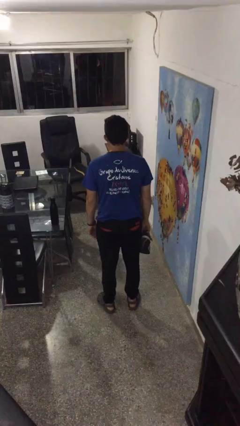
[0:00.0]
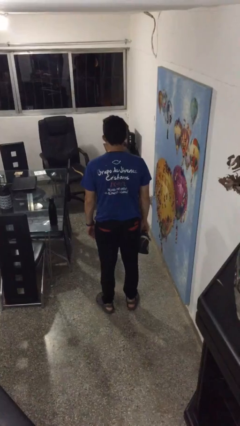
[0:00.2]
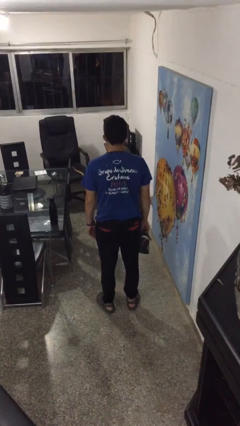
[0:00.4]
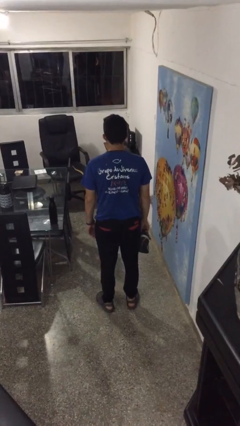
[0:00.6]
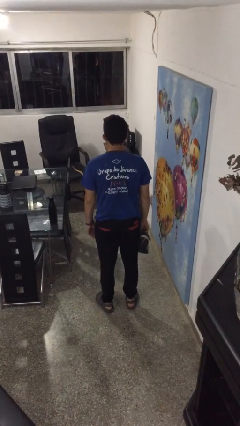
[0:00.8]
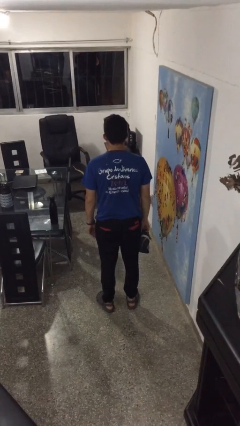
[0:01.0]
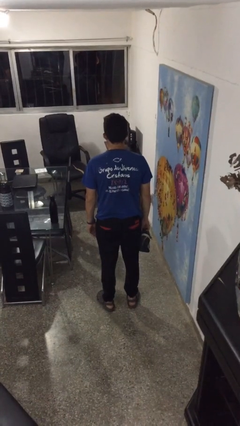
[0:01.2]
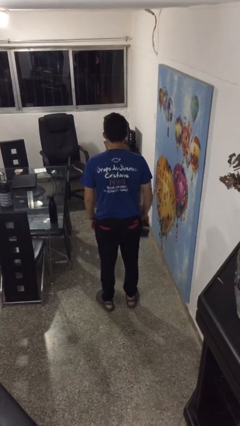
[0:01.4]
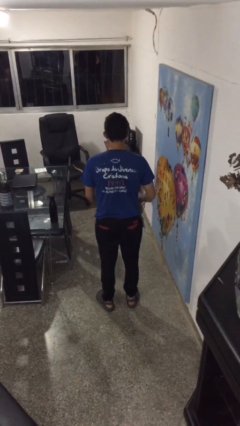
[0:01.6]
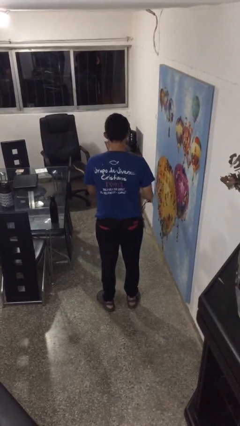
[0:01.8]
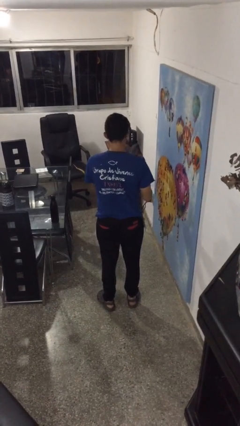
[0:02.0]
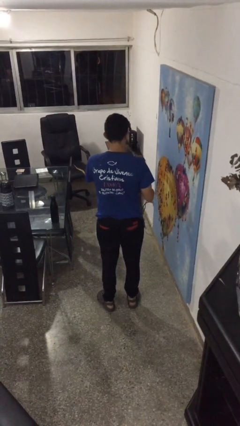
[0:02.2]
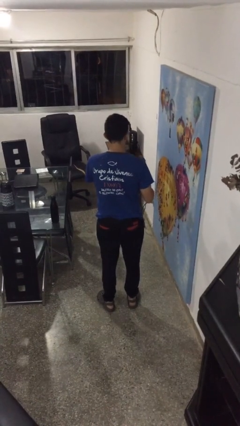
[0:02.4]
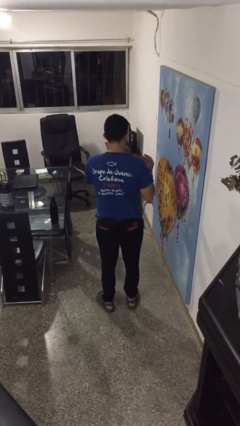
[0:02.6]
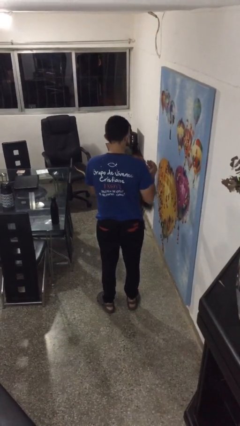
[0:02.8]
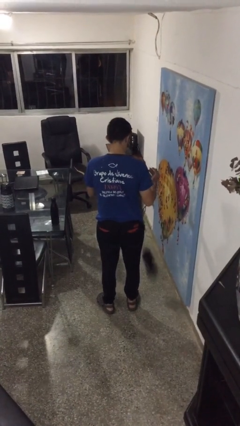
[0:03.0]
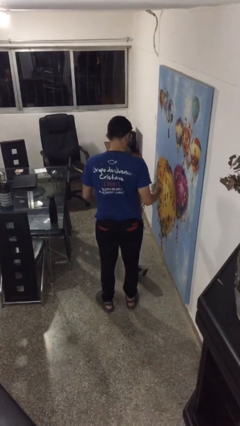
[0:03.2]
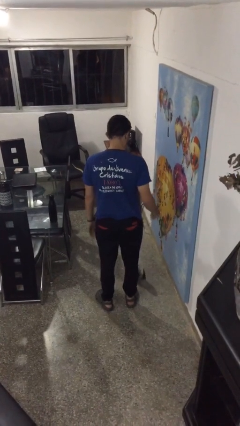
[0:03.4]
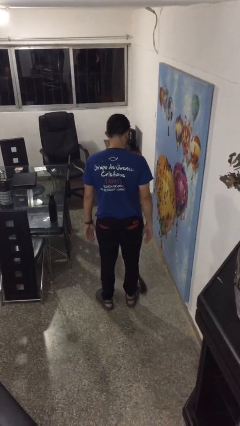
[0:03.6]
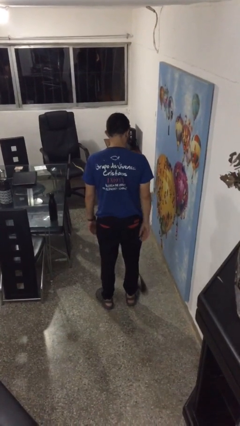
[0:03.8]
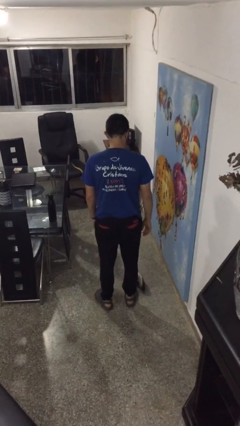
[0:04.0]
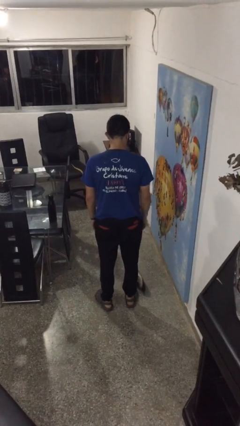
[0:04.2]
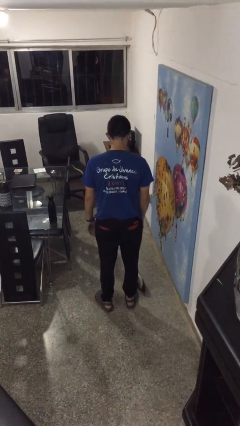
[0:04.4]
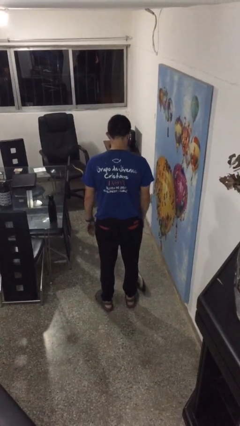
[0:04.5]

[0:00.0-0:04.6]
person drops object

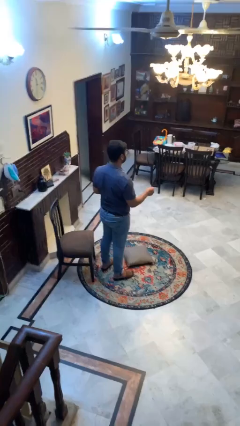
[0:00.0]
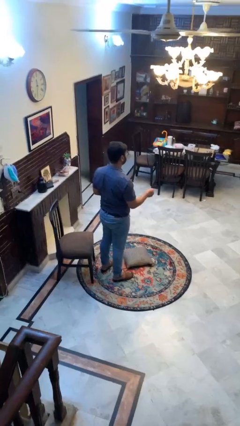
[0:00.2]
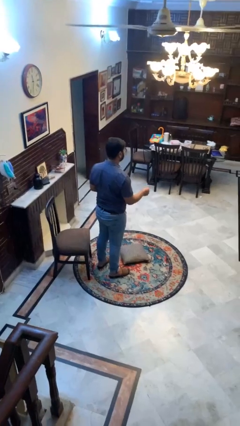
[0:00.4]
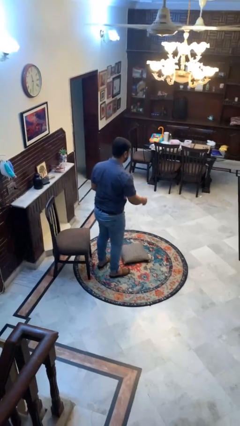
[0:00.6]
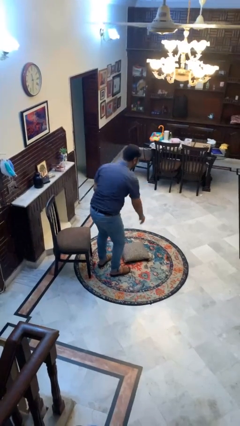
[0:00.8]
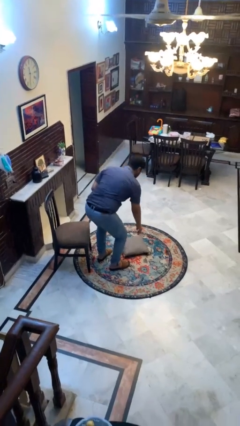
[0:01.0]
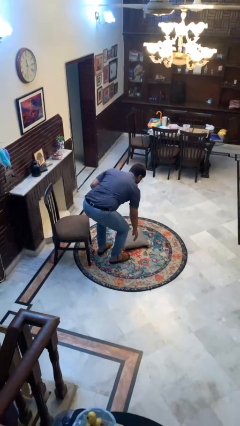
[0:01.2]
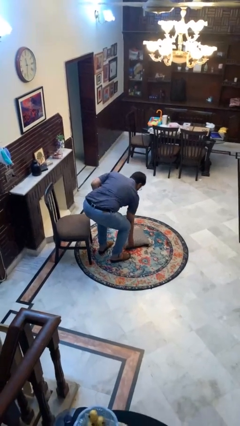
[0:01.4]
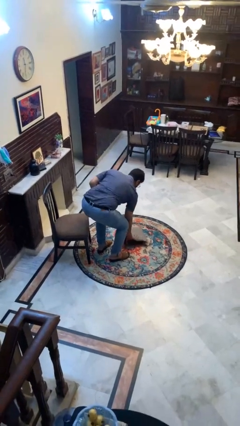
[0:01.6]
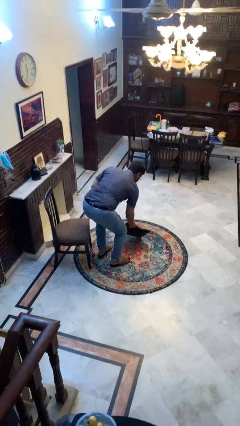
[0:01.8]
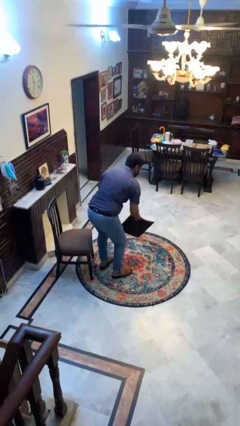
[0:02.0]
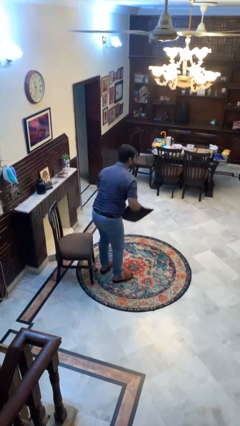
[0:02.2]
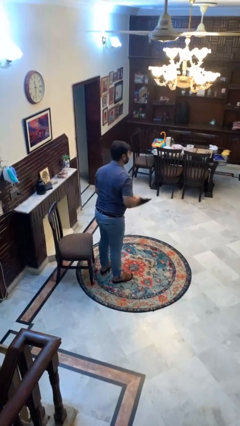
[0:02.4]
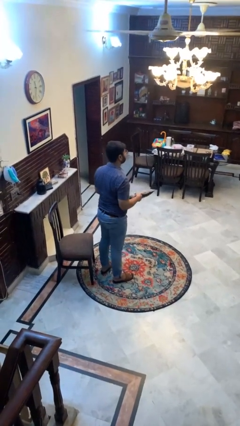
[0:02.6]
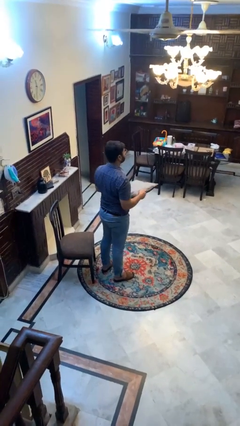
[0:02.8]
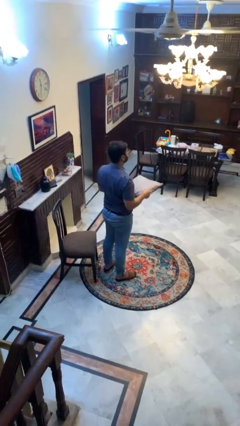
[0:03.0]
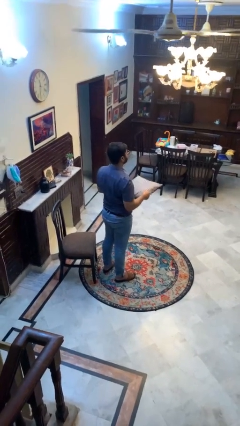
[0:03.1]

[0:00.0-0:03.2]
person picks up object from floor

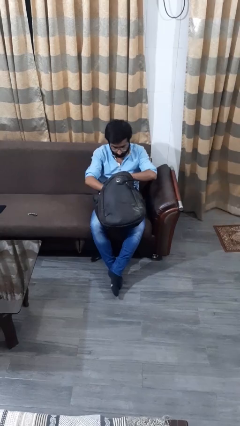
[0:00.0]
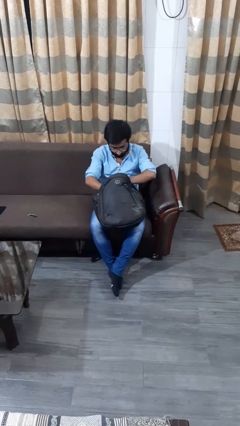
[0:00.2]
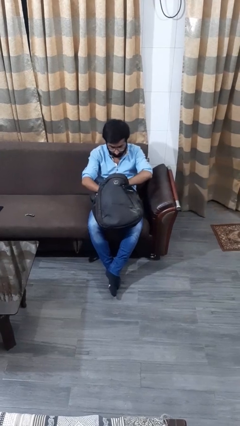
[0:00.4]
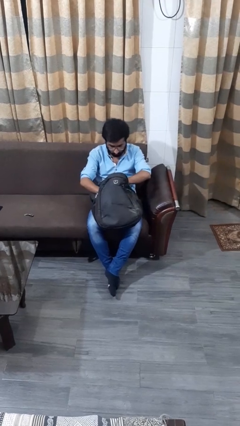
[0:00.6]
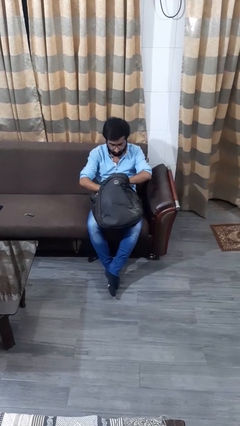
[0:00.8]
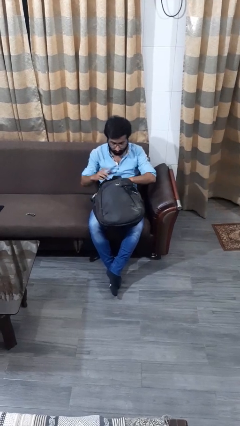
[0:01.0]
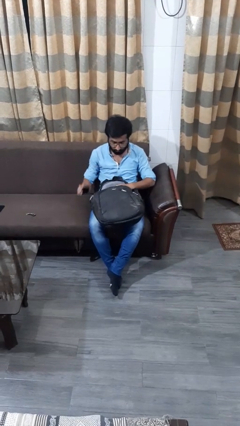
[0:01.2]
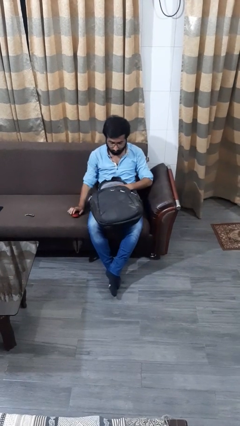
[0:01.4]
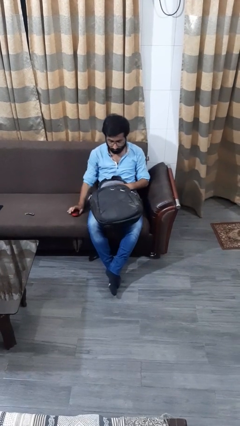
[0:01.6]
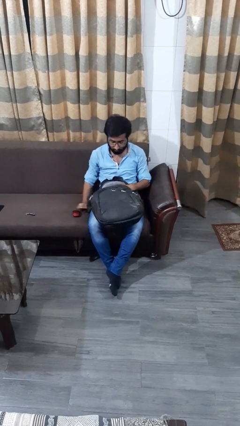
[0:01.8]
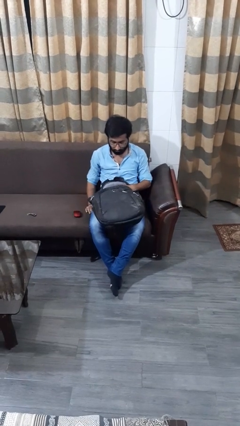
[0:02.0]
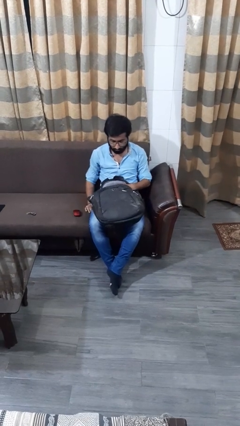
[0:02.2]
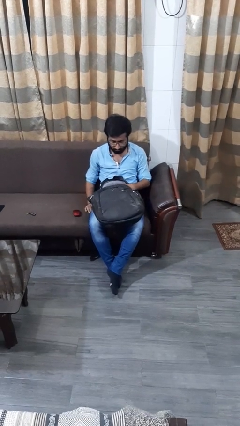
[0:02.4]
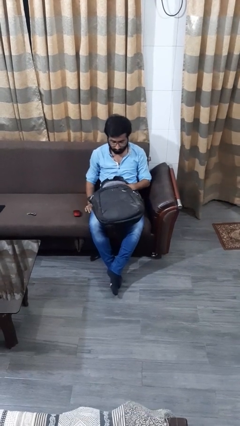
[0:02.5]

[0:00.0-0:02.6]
person takes object from backpack

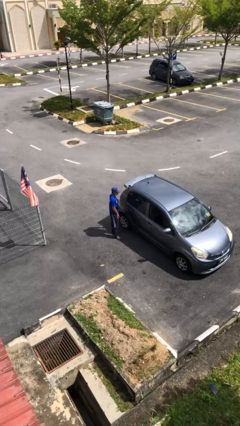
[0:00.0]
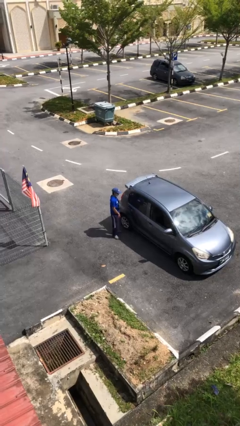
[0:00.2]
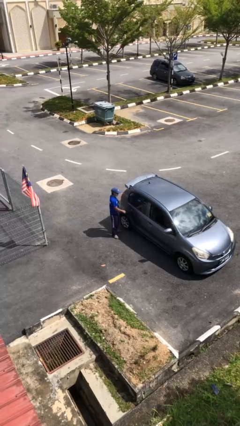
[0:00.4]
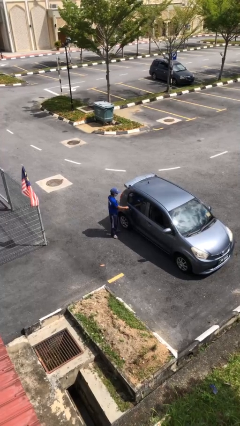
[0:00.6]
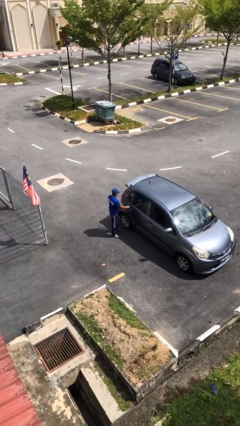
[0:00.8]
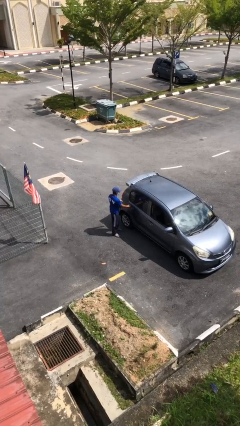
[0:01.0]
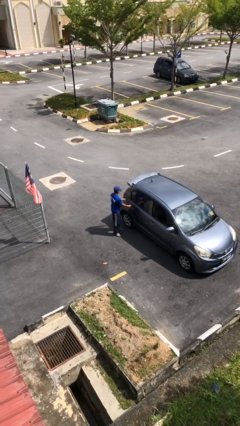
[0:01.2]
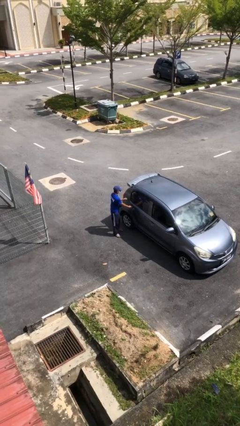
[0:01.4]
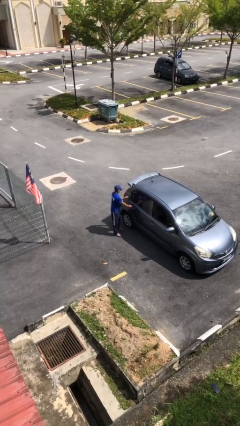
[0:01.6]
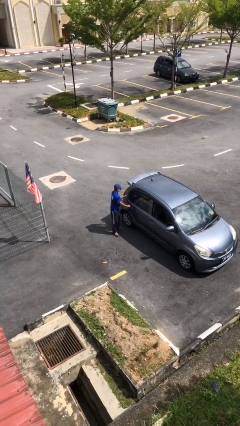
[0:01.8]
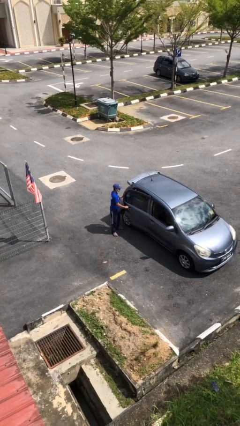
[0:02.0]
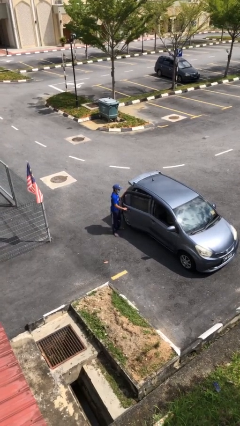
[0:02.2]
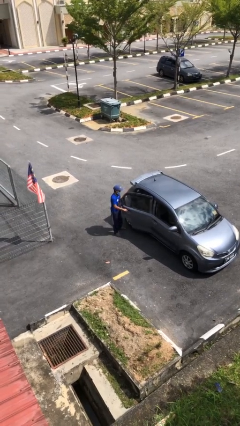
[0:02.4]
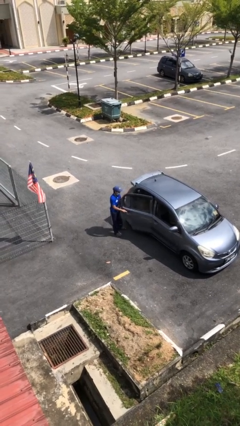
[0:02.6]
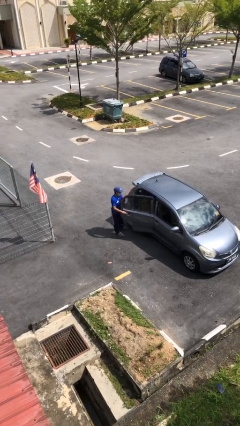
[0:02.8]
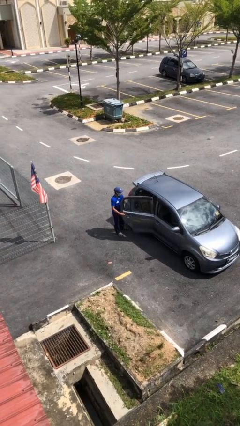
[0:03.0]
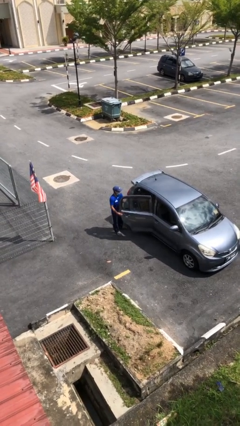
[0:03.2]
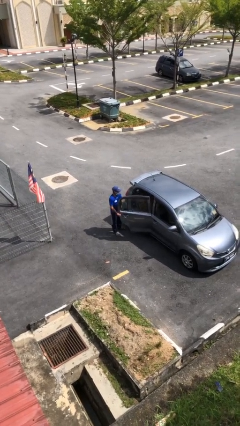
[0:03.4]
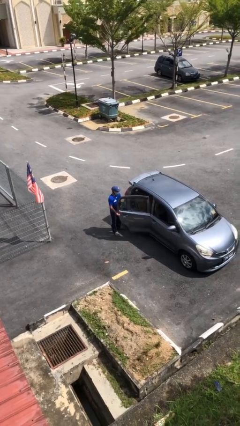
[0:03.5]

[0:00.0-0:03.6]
person opens car door

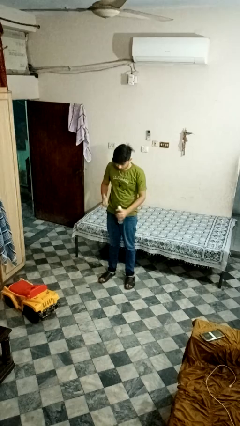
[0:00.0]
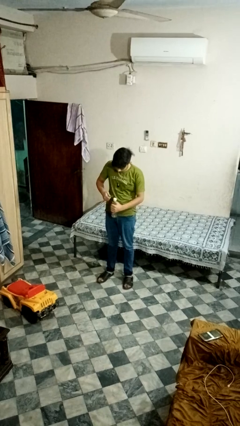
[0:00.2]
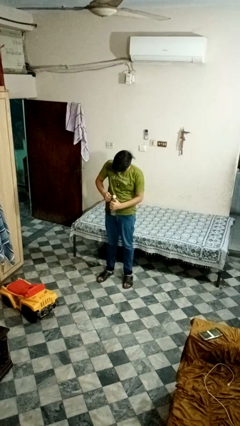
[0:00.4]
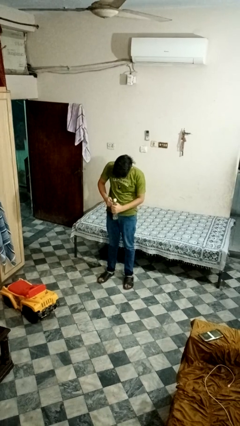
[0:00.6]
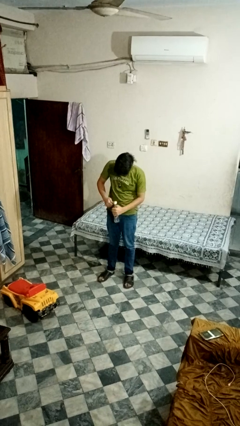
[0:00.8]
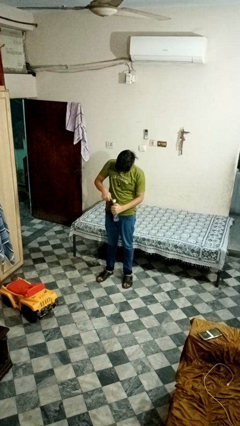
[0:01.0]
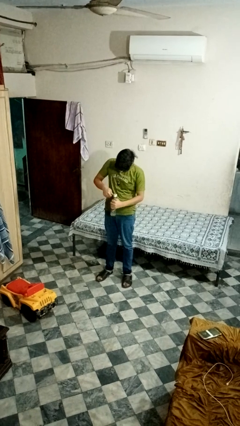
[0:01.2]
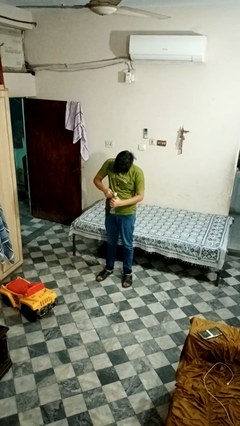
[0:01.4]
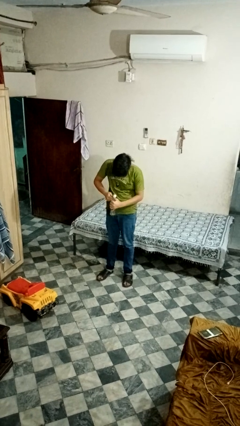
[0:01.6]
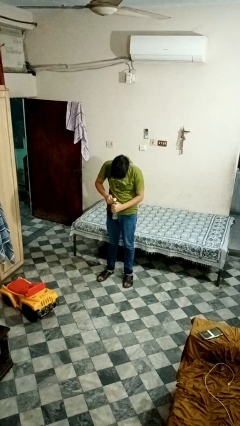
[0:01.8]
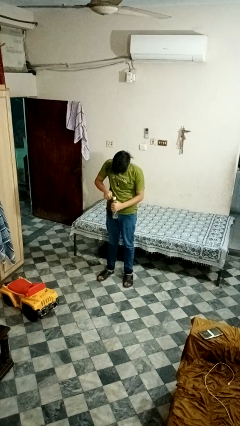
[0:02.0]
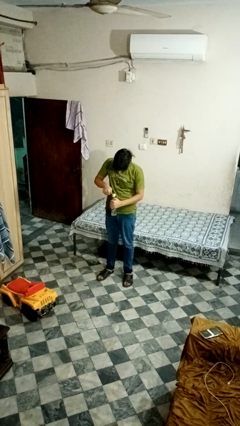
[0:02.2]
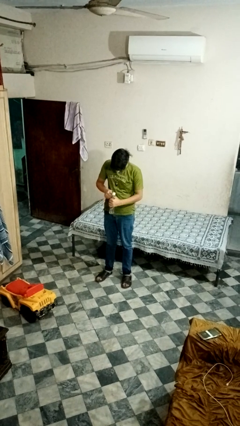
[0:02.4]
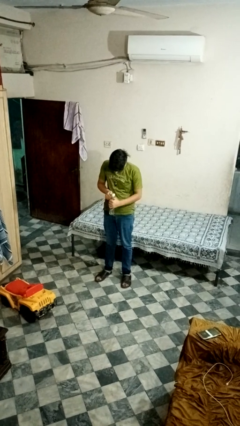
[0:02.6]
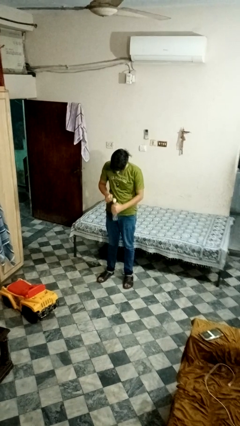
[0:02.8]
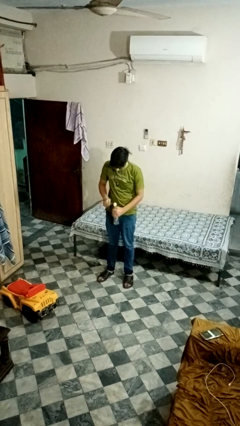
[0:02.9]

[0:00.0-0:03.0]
person opens can with can opener

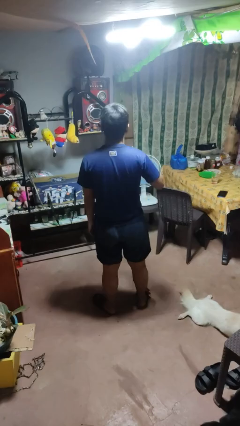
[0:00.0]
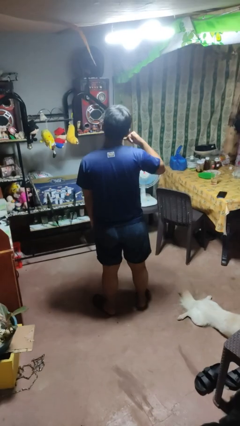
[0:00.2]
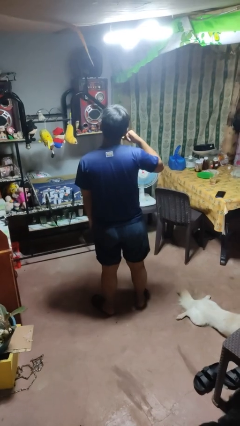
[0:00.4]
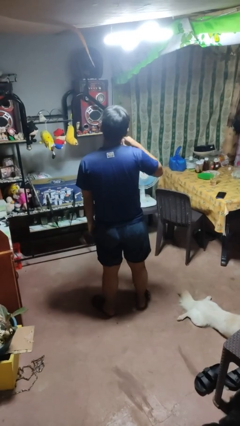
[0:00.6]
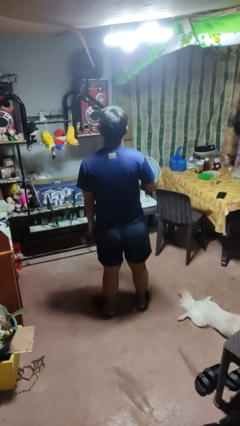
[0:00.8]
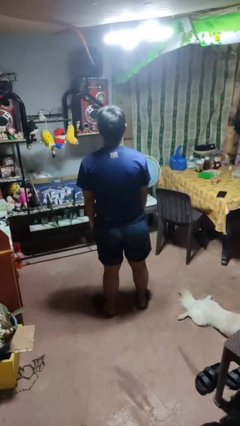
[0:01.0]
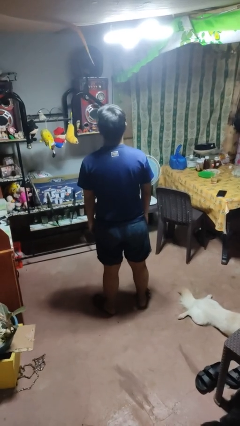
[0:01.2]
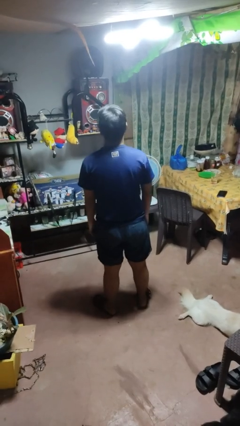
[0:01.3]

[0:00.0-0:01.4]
person gestures call me
